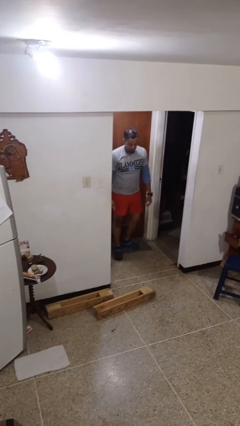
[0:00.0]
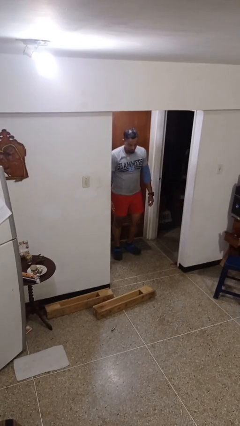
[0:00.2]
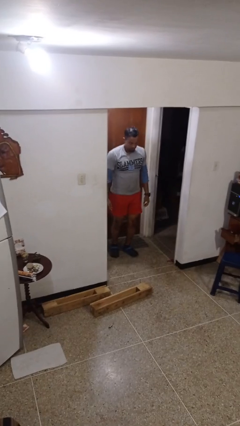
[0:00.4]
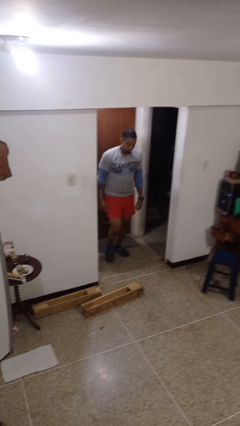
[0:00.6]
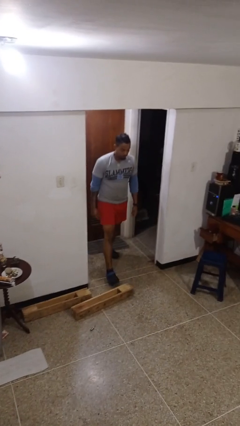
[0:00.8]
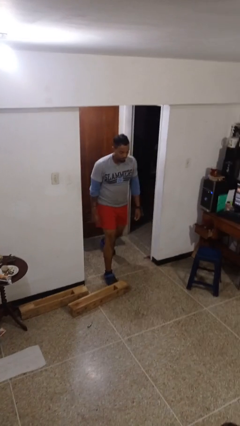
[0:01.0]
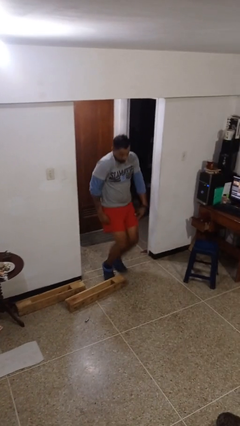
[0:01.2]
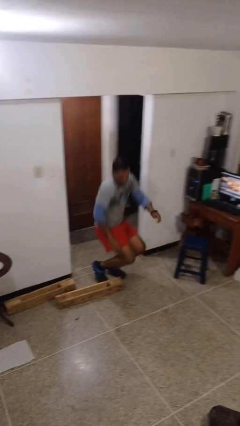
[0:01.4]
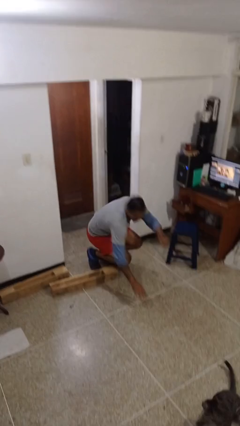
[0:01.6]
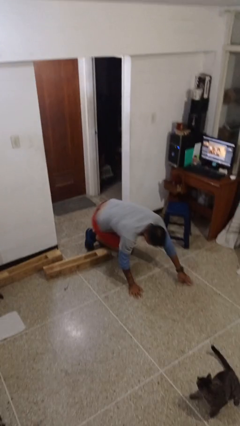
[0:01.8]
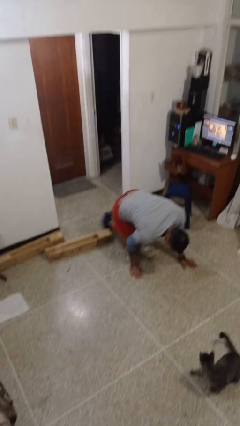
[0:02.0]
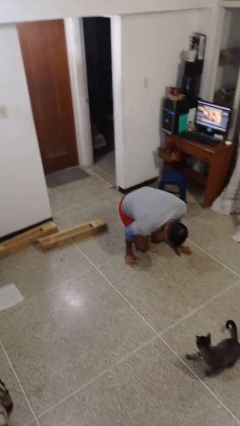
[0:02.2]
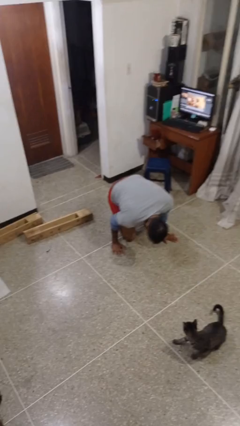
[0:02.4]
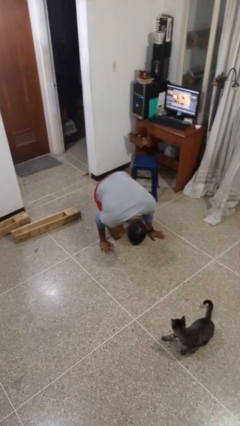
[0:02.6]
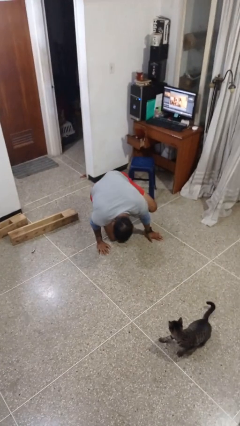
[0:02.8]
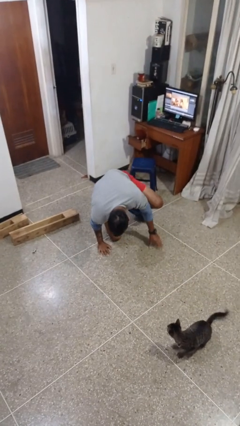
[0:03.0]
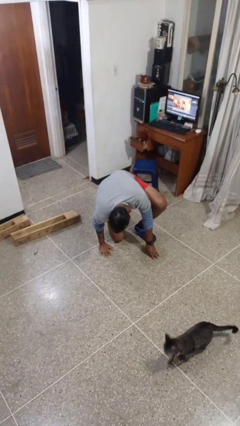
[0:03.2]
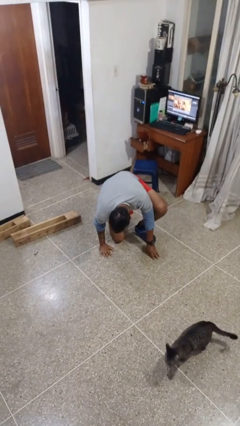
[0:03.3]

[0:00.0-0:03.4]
person trips on object on floor

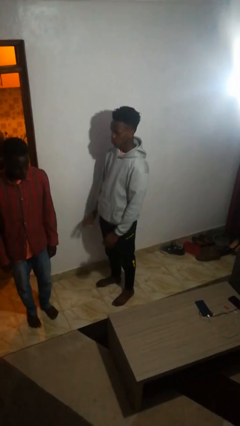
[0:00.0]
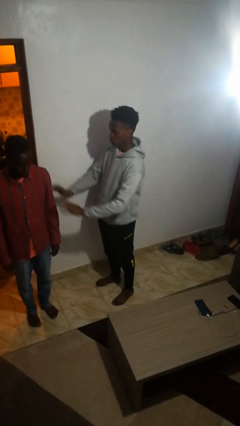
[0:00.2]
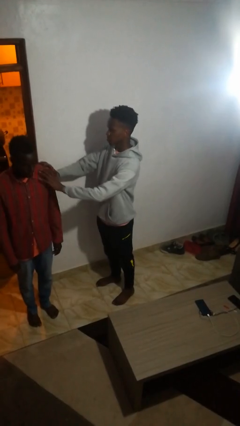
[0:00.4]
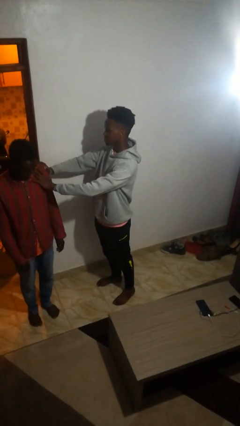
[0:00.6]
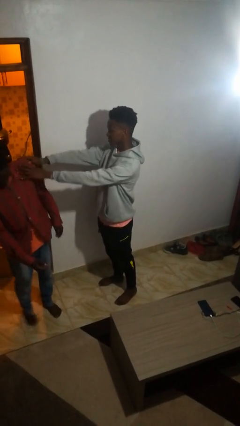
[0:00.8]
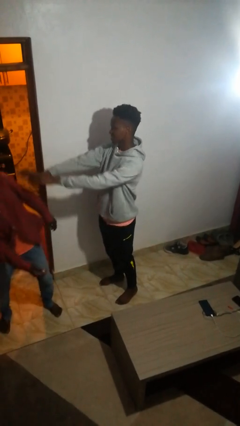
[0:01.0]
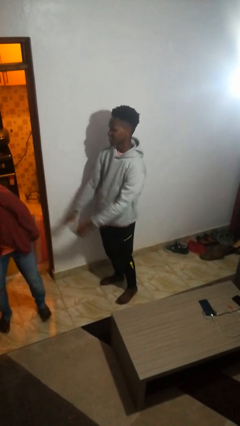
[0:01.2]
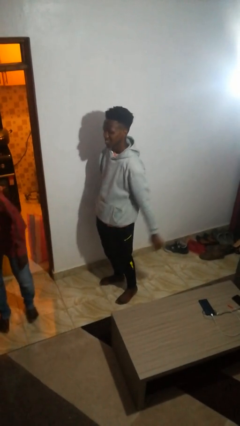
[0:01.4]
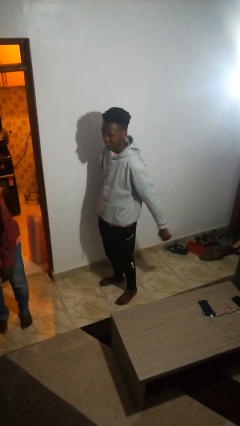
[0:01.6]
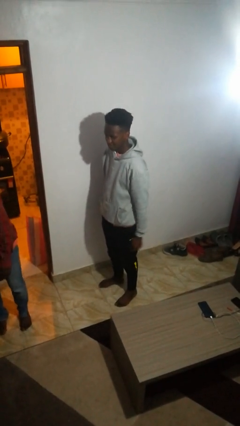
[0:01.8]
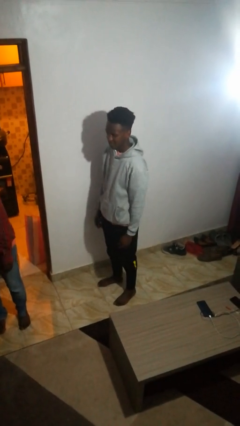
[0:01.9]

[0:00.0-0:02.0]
person shoves person

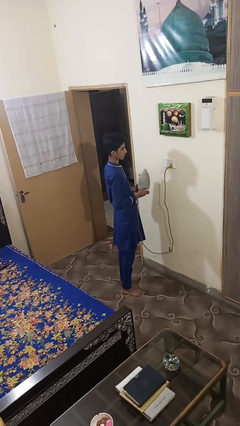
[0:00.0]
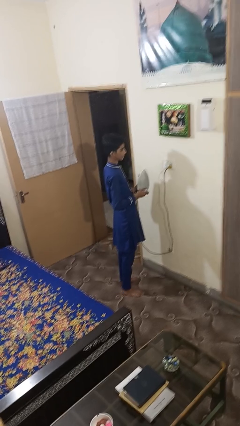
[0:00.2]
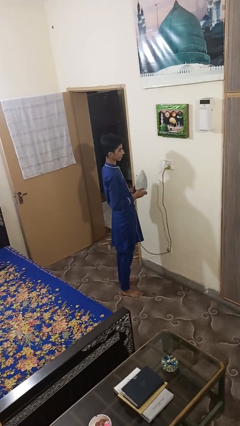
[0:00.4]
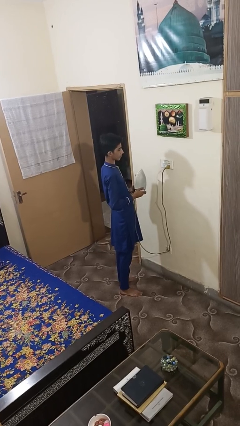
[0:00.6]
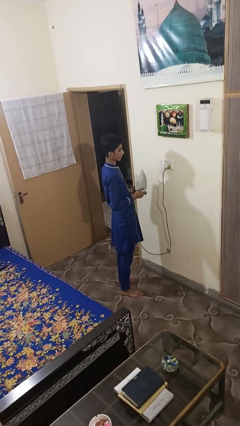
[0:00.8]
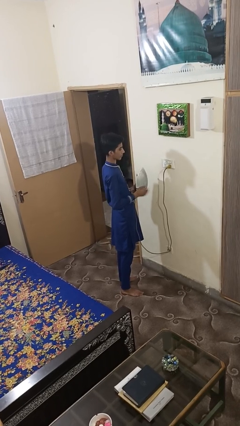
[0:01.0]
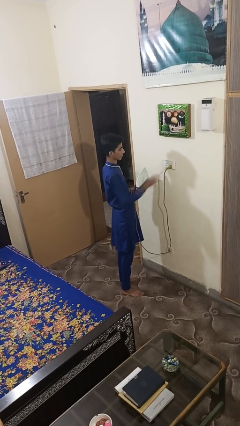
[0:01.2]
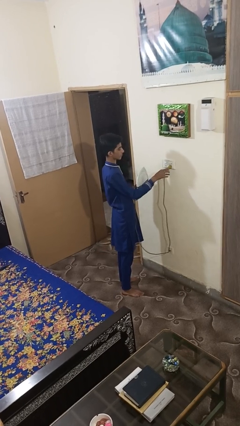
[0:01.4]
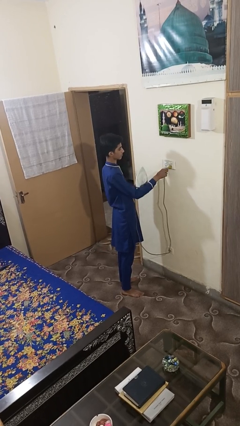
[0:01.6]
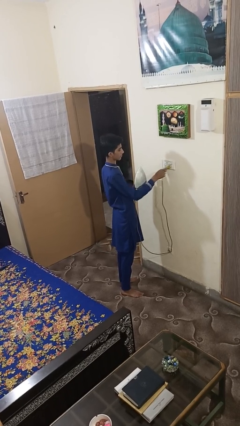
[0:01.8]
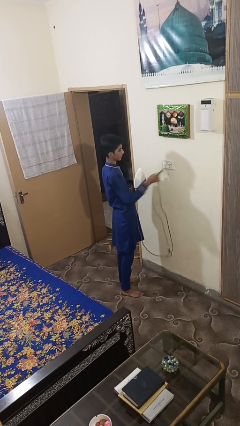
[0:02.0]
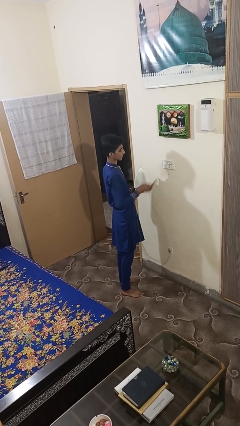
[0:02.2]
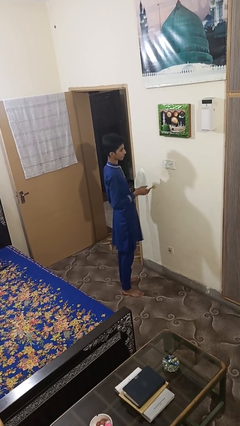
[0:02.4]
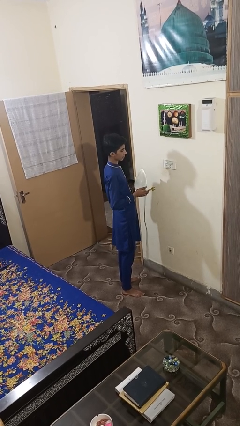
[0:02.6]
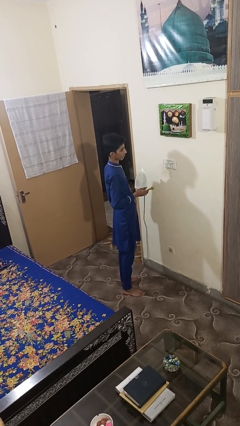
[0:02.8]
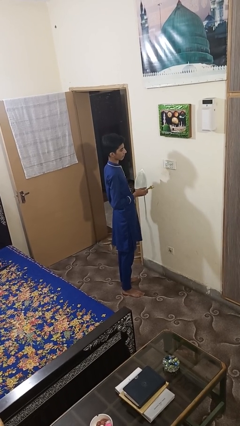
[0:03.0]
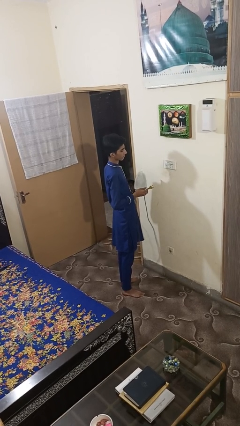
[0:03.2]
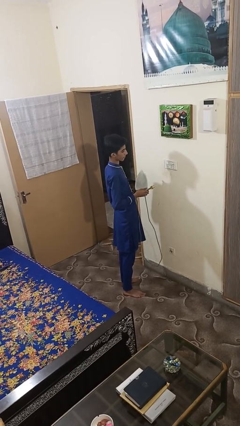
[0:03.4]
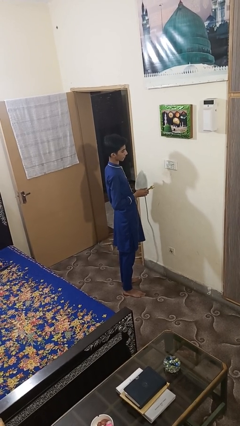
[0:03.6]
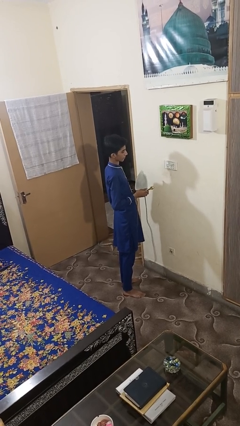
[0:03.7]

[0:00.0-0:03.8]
person unplugs from electrical socket

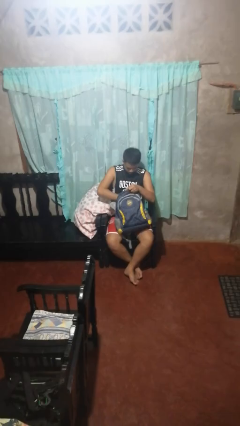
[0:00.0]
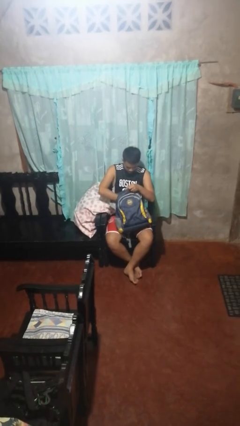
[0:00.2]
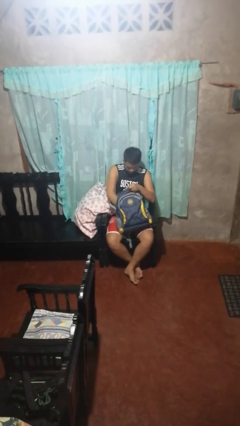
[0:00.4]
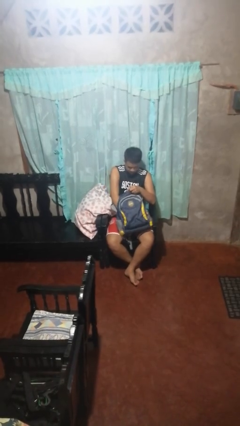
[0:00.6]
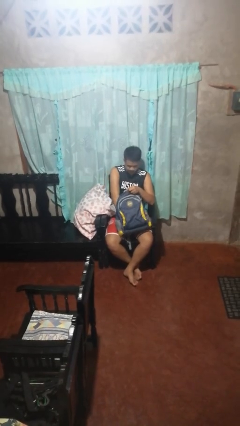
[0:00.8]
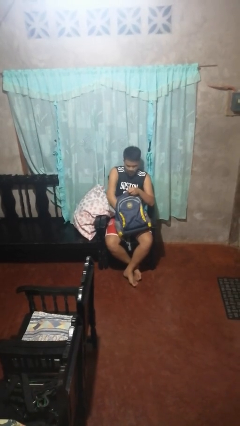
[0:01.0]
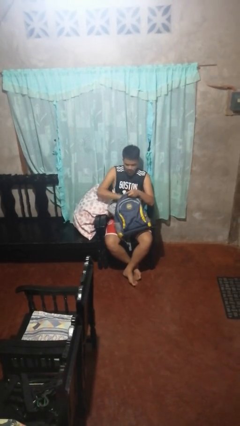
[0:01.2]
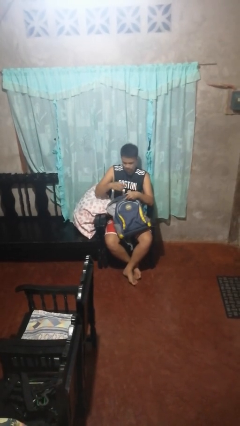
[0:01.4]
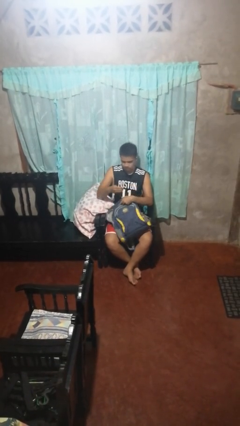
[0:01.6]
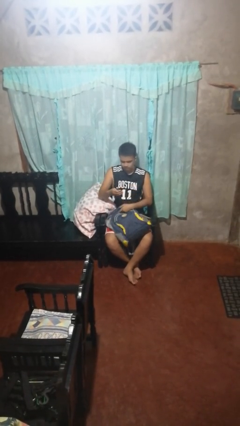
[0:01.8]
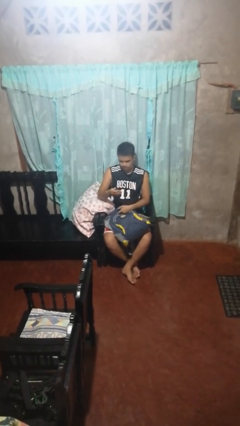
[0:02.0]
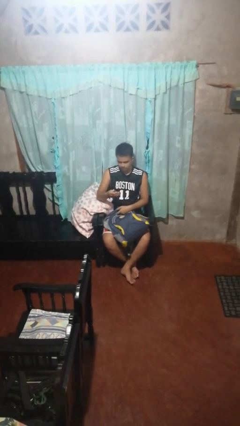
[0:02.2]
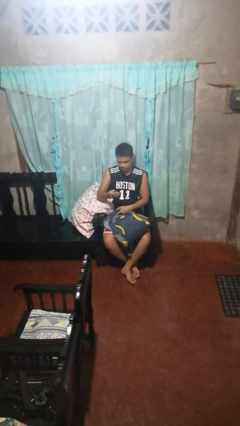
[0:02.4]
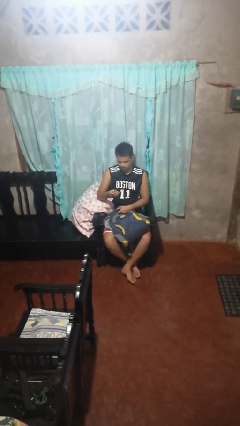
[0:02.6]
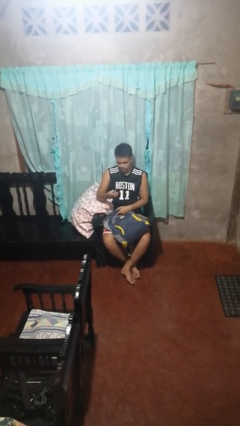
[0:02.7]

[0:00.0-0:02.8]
person takes object from backpack

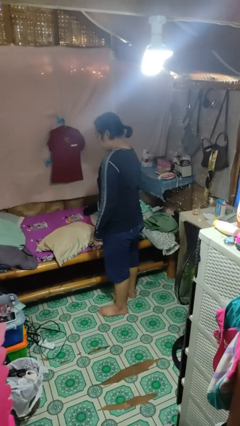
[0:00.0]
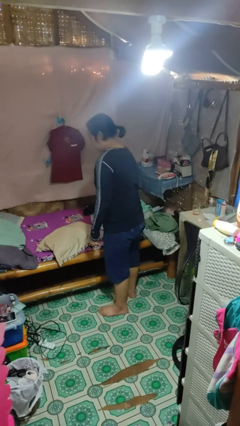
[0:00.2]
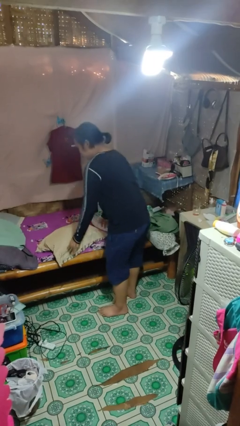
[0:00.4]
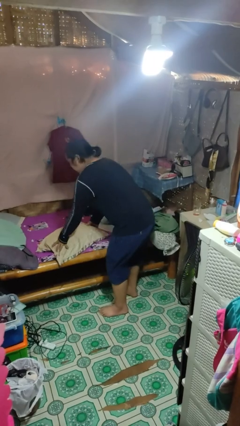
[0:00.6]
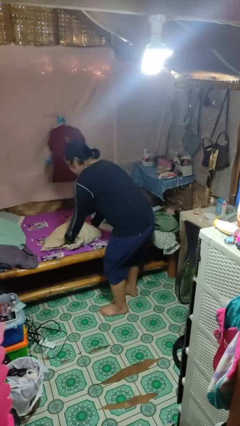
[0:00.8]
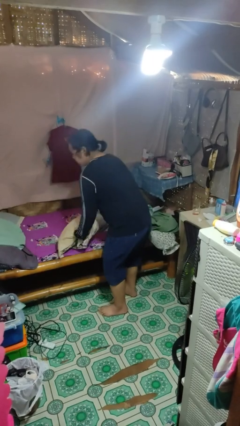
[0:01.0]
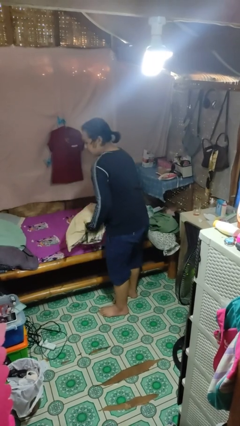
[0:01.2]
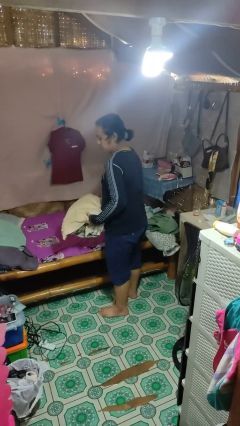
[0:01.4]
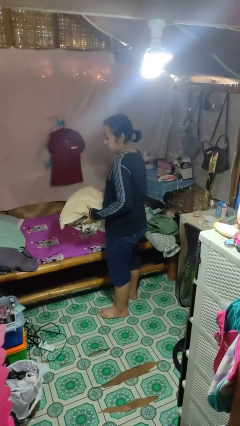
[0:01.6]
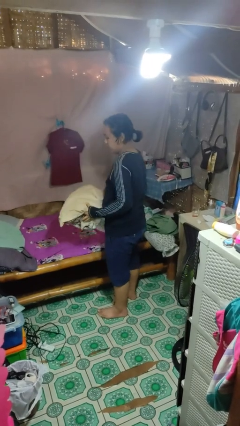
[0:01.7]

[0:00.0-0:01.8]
person picks up object from bed

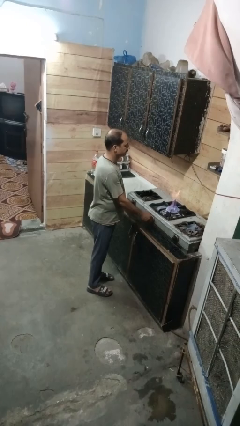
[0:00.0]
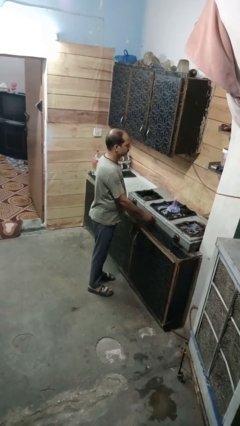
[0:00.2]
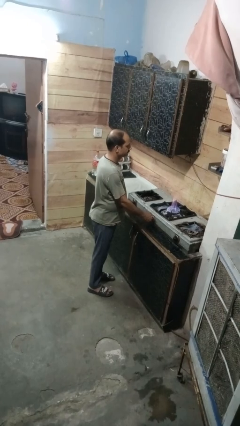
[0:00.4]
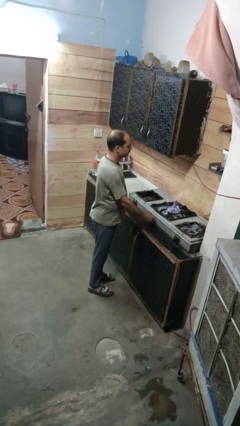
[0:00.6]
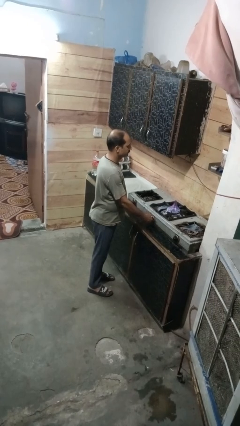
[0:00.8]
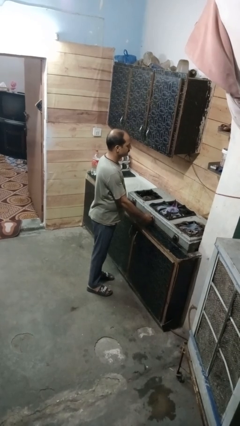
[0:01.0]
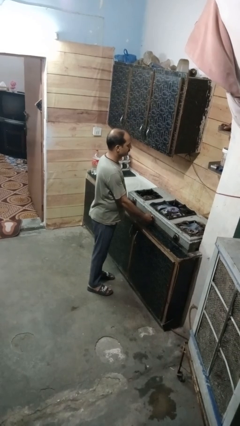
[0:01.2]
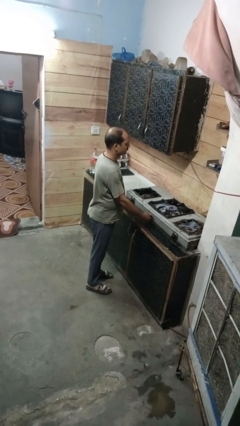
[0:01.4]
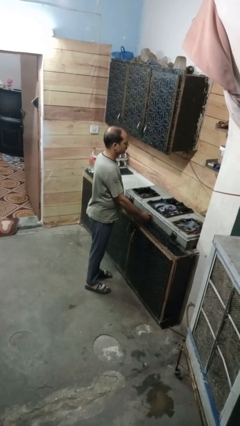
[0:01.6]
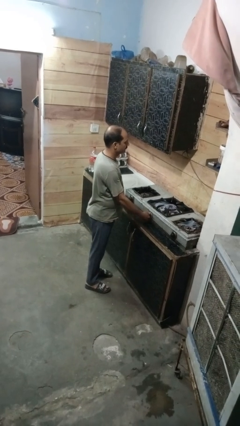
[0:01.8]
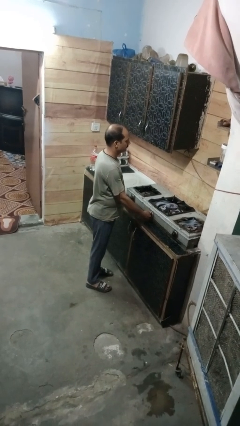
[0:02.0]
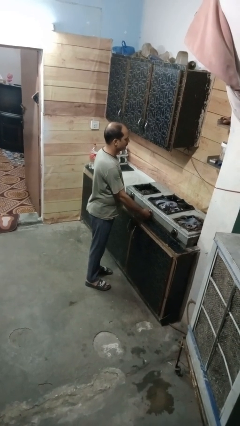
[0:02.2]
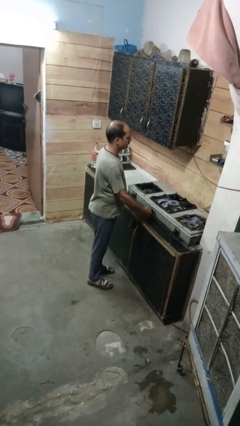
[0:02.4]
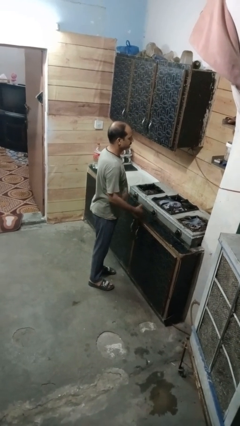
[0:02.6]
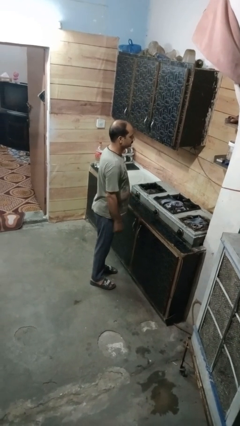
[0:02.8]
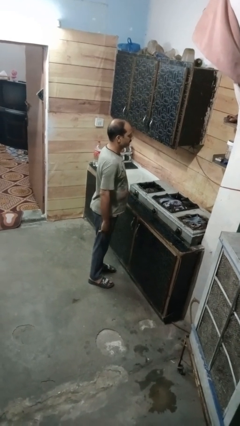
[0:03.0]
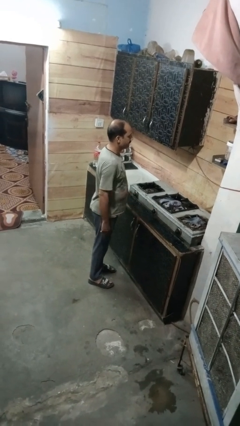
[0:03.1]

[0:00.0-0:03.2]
person turns off stovetop

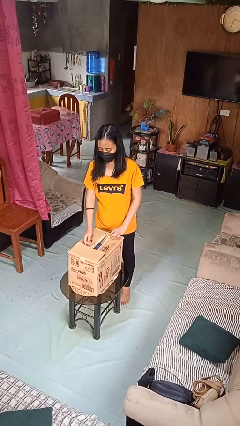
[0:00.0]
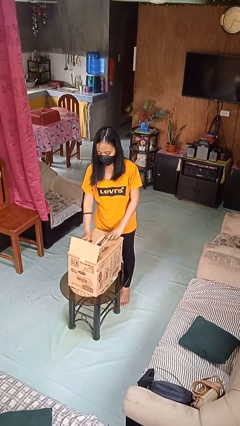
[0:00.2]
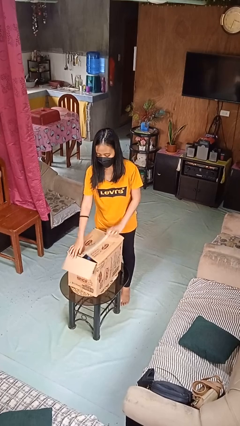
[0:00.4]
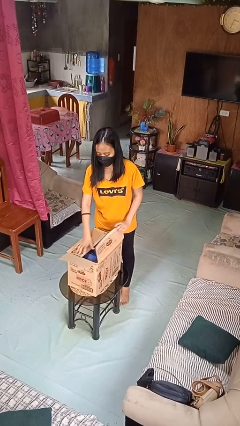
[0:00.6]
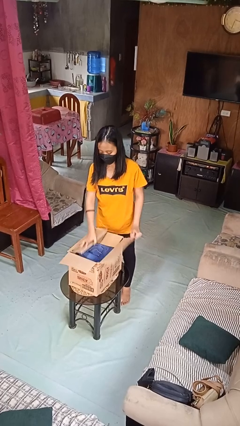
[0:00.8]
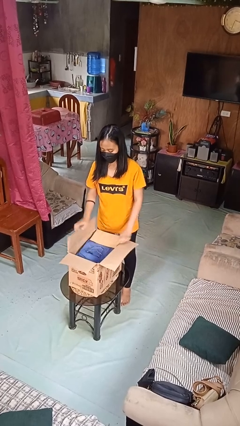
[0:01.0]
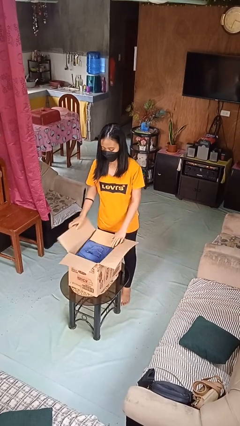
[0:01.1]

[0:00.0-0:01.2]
person opens box
